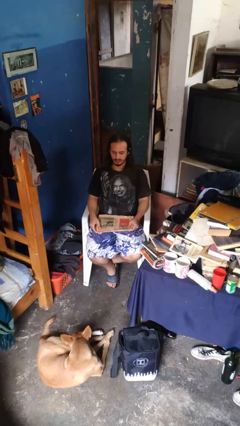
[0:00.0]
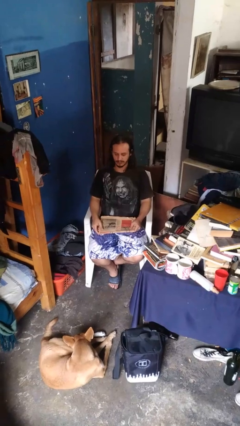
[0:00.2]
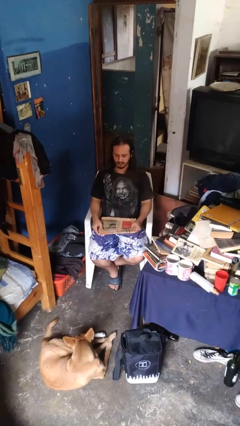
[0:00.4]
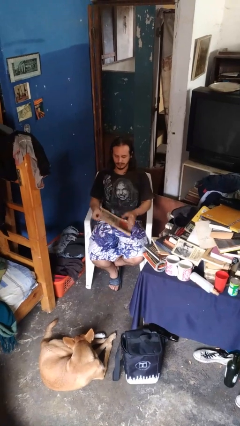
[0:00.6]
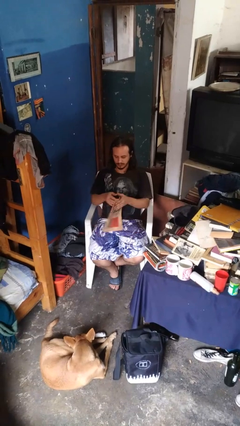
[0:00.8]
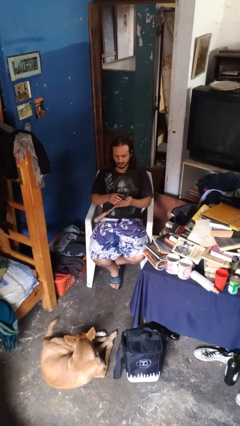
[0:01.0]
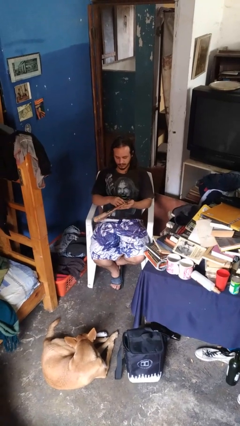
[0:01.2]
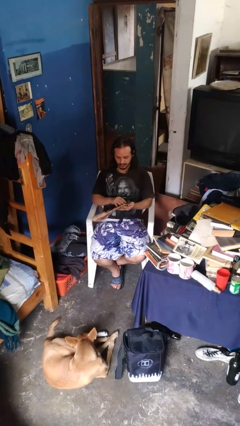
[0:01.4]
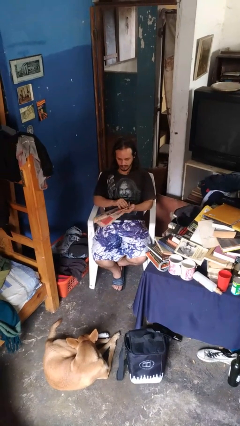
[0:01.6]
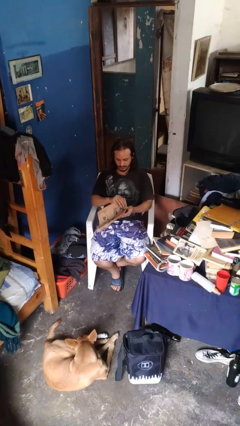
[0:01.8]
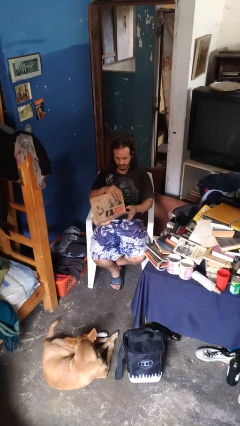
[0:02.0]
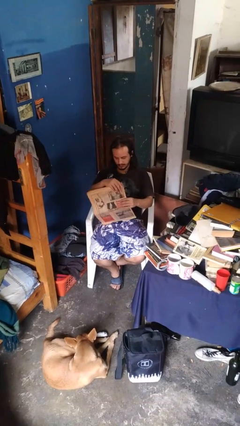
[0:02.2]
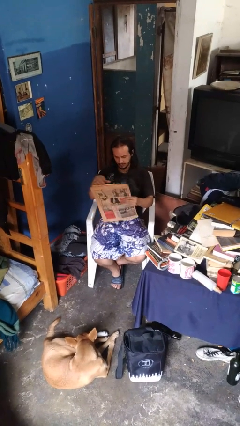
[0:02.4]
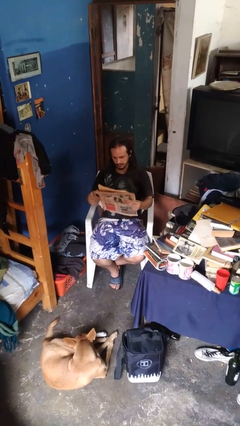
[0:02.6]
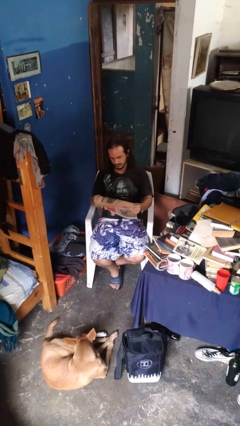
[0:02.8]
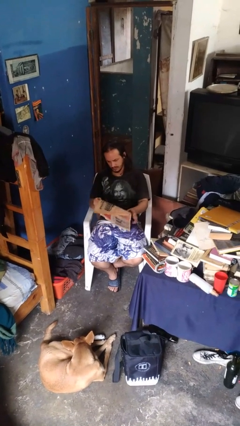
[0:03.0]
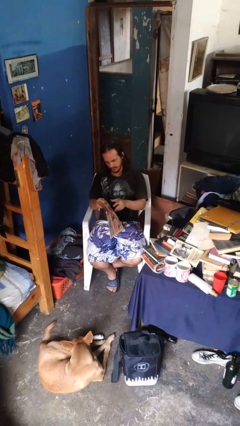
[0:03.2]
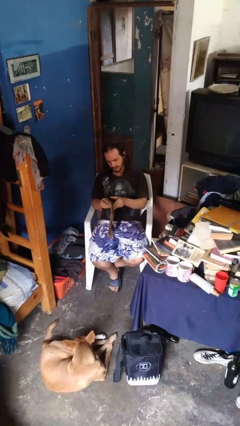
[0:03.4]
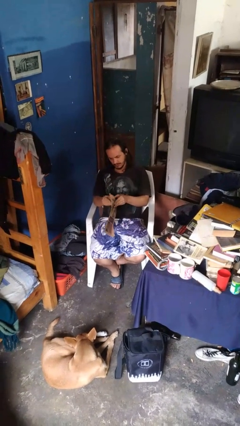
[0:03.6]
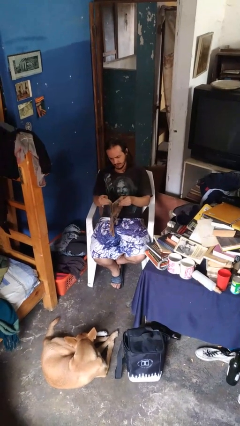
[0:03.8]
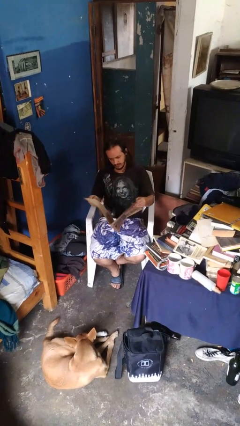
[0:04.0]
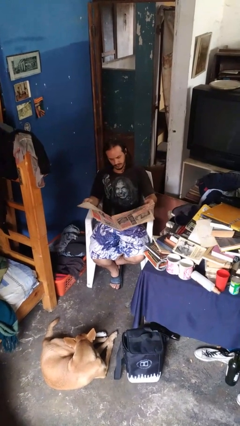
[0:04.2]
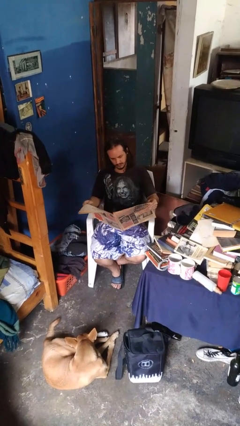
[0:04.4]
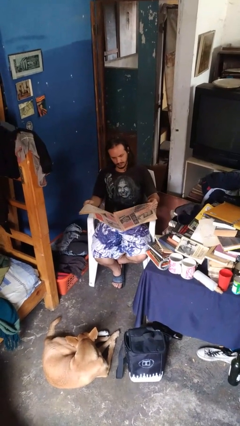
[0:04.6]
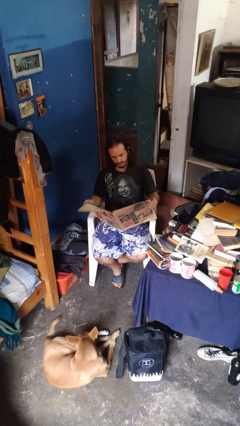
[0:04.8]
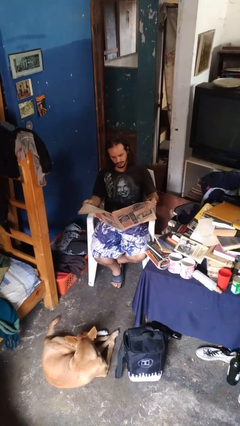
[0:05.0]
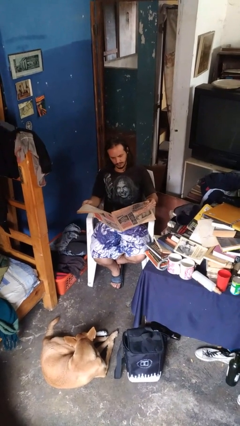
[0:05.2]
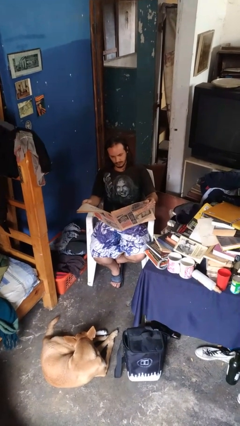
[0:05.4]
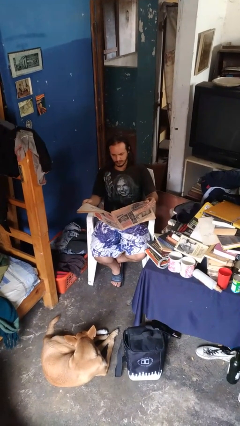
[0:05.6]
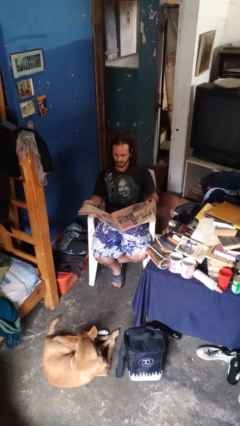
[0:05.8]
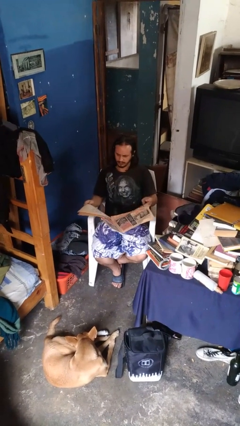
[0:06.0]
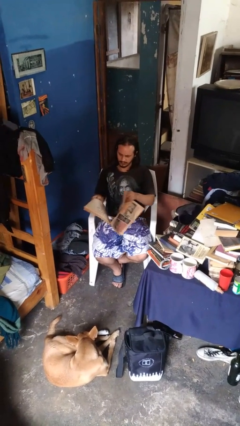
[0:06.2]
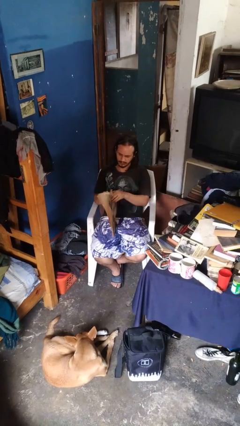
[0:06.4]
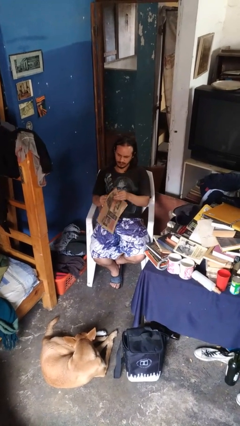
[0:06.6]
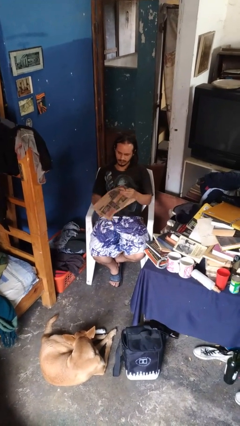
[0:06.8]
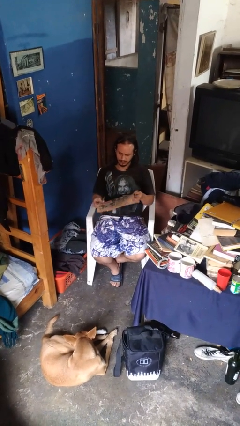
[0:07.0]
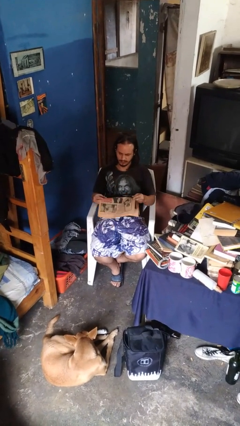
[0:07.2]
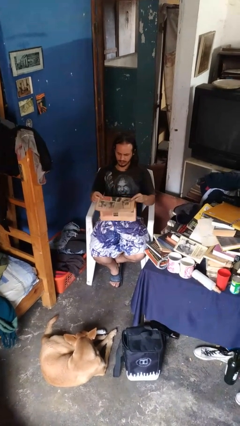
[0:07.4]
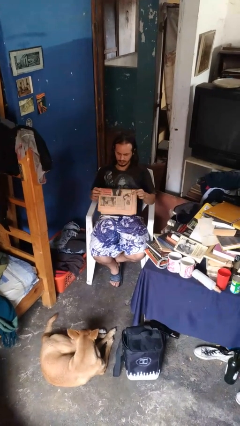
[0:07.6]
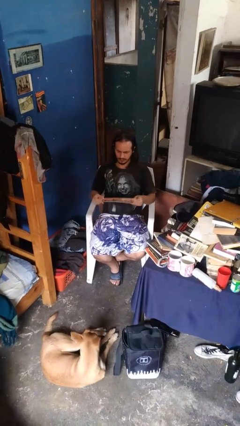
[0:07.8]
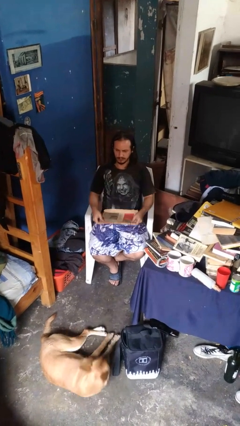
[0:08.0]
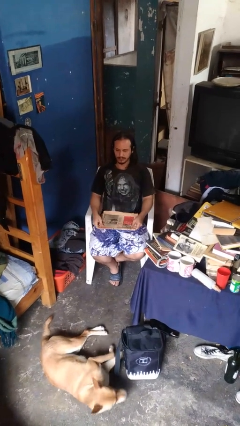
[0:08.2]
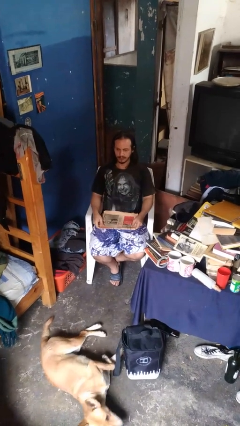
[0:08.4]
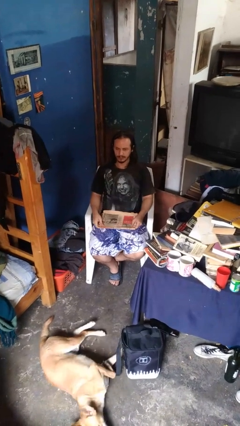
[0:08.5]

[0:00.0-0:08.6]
person reads newspaper

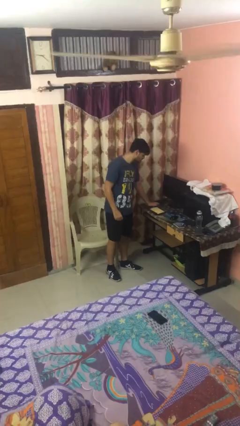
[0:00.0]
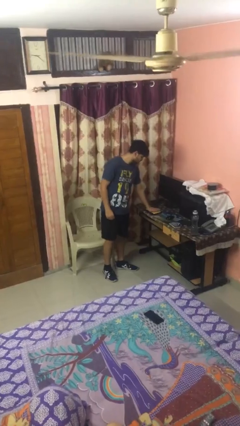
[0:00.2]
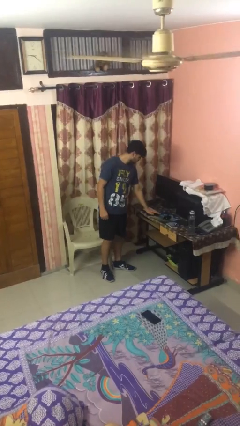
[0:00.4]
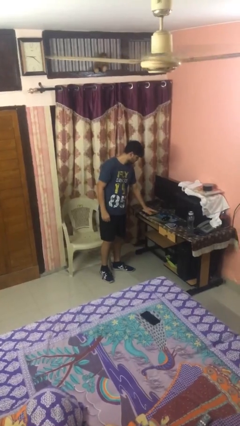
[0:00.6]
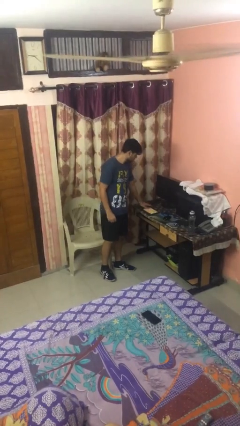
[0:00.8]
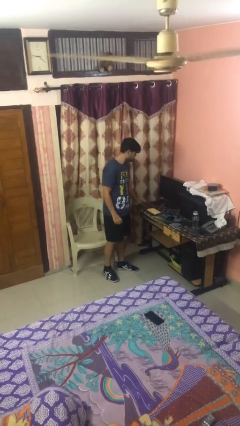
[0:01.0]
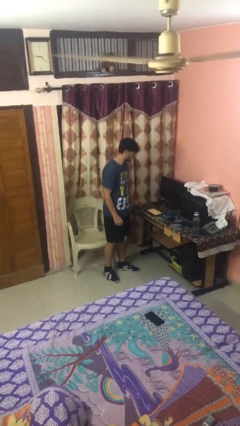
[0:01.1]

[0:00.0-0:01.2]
person waves hand over object

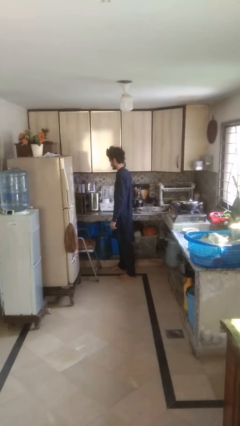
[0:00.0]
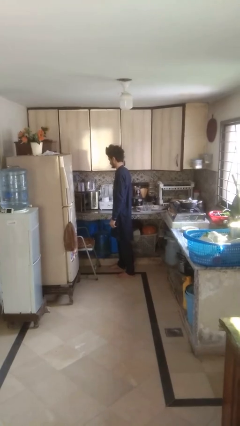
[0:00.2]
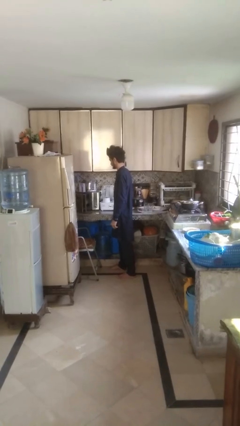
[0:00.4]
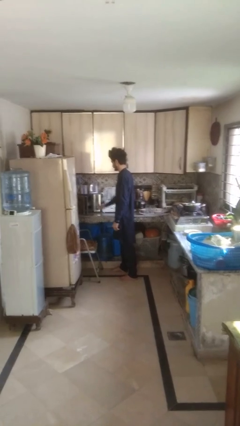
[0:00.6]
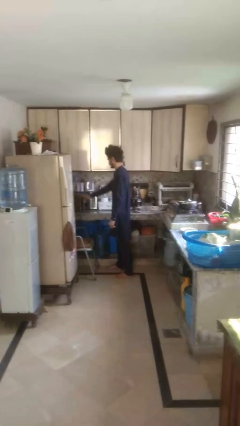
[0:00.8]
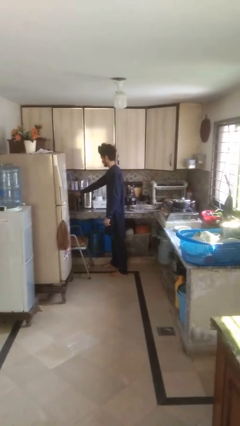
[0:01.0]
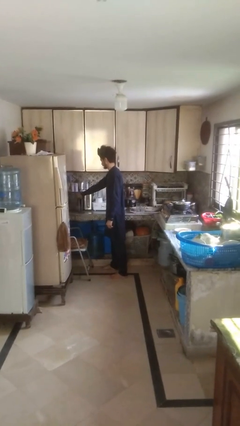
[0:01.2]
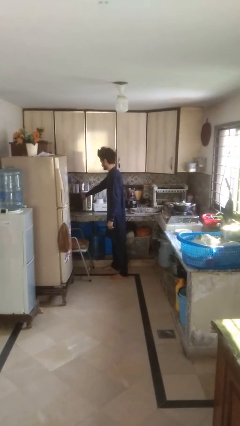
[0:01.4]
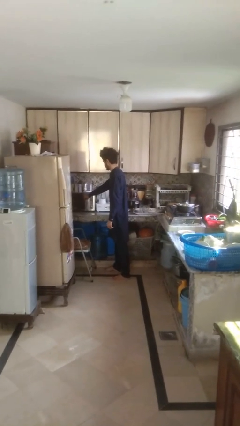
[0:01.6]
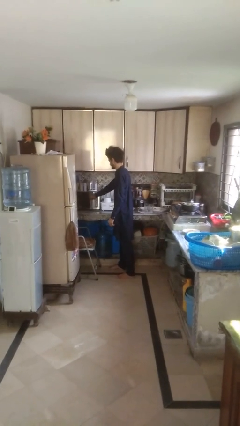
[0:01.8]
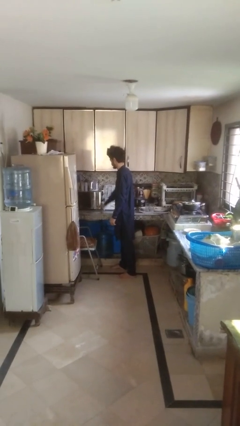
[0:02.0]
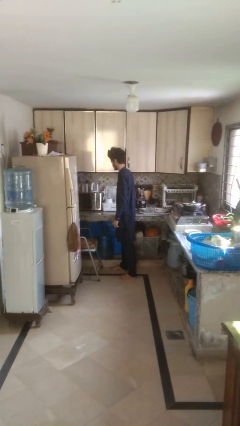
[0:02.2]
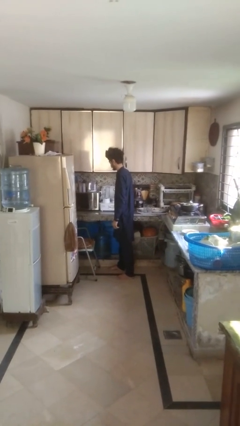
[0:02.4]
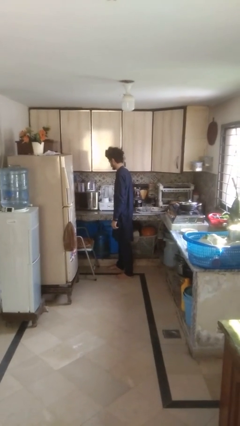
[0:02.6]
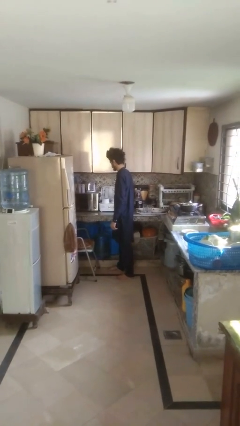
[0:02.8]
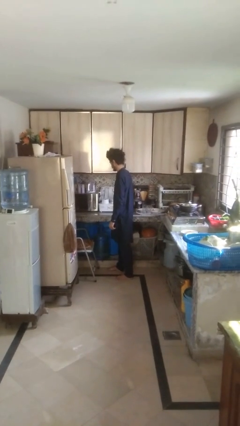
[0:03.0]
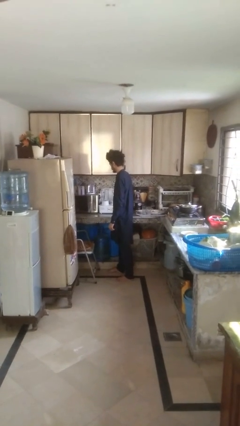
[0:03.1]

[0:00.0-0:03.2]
person closes oven door

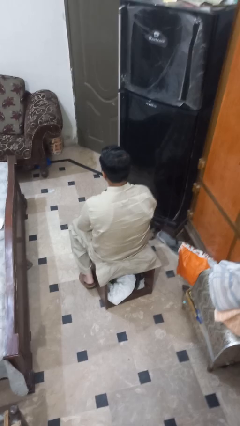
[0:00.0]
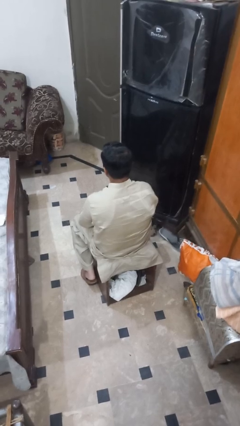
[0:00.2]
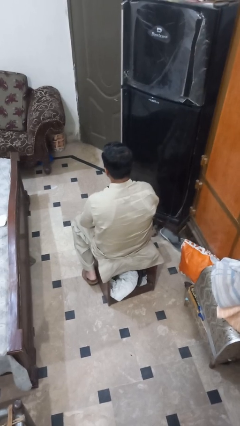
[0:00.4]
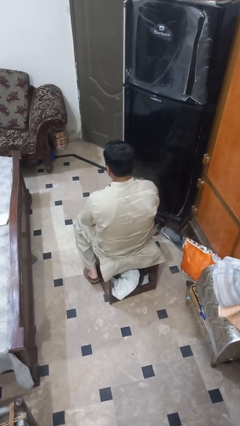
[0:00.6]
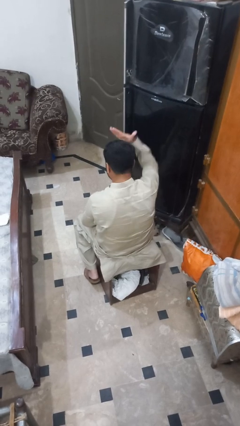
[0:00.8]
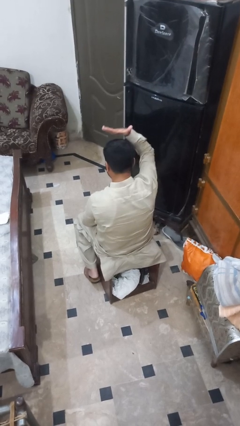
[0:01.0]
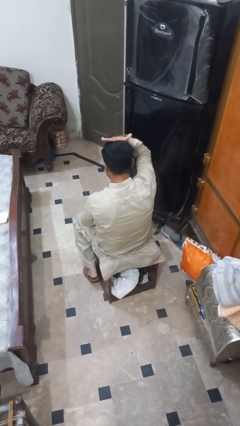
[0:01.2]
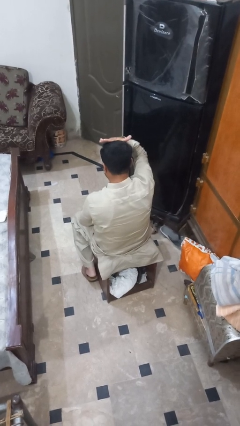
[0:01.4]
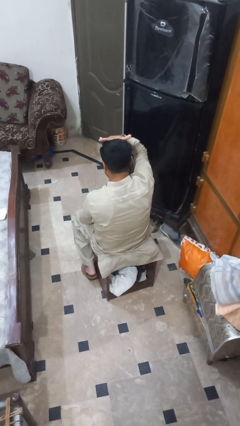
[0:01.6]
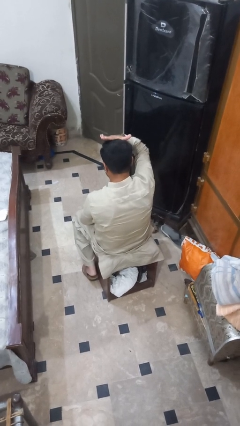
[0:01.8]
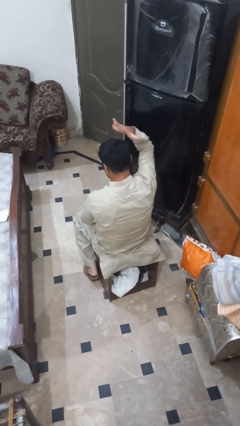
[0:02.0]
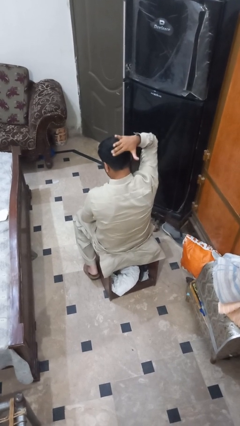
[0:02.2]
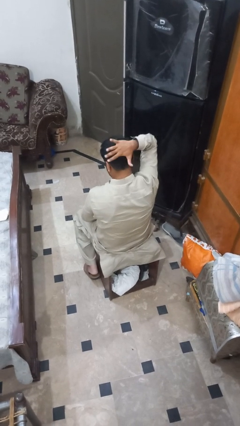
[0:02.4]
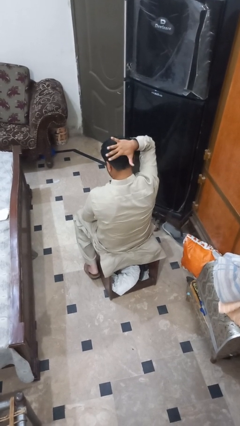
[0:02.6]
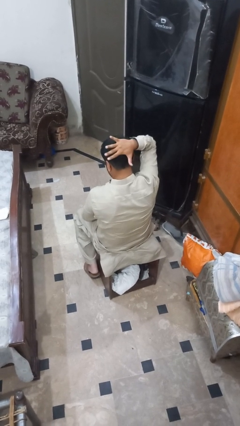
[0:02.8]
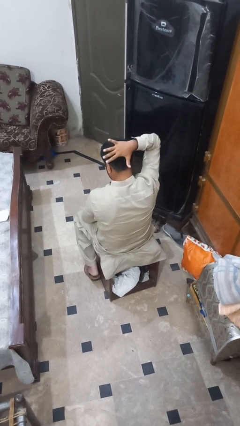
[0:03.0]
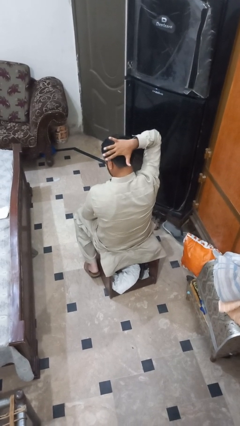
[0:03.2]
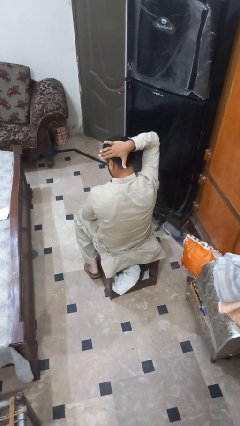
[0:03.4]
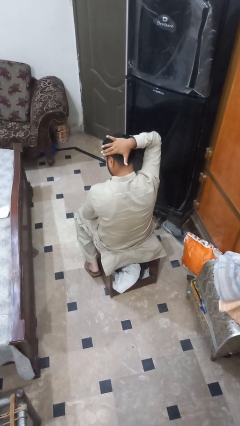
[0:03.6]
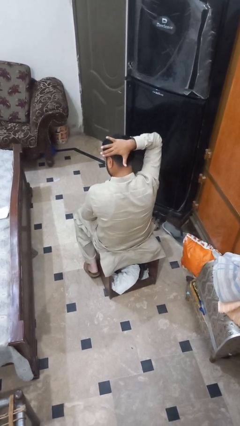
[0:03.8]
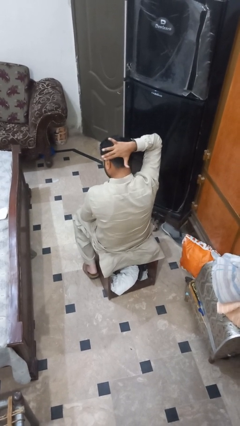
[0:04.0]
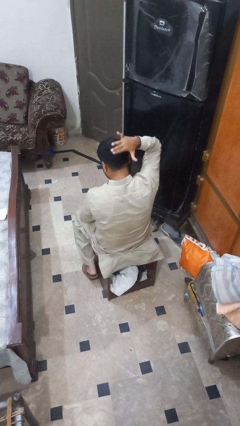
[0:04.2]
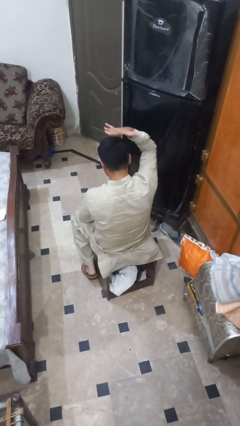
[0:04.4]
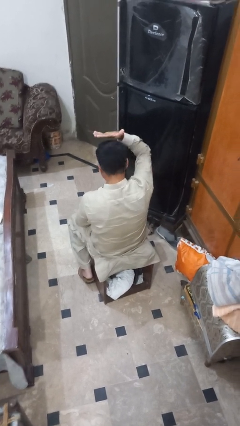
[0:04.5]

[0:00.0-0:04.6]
person pats head
